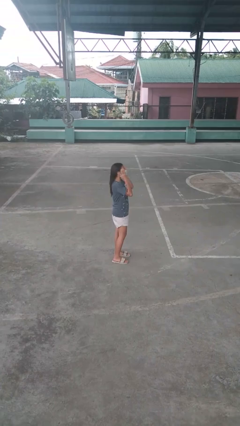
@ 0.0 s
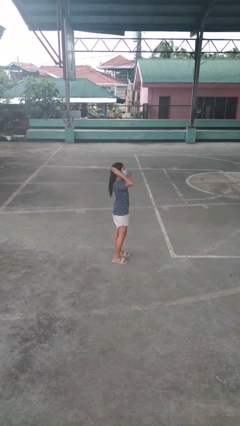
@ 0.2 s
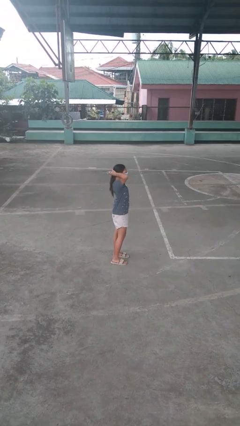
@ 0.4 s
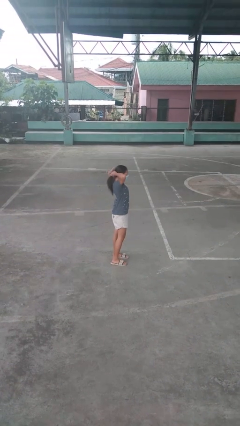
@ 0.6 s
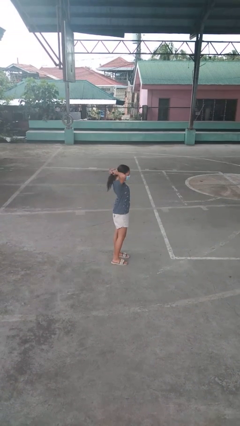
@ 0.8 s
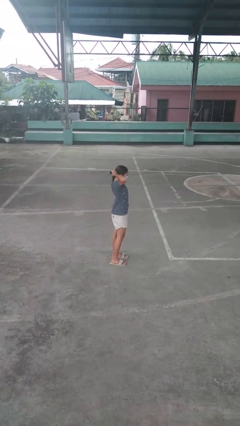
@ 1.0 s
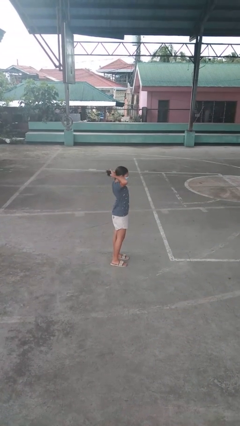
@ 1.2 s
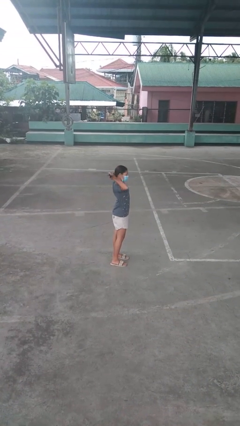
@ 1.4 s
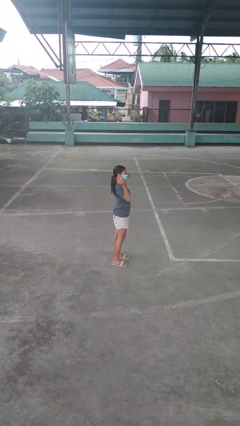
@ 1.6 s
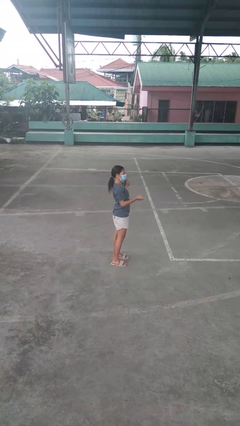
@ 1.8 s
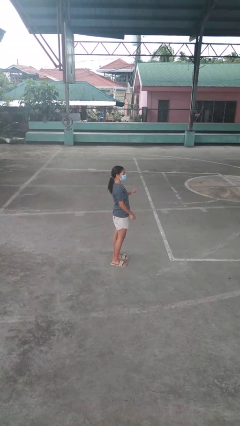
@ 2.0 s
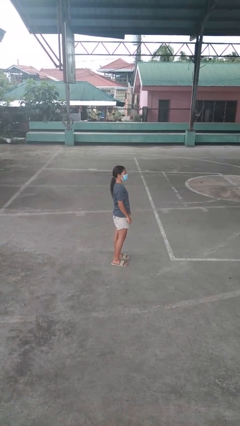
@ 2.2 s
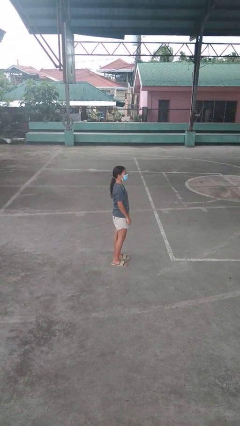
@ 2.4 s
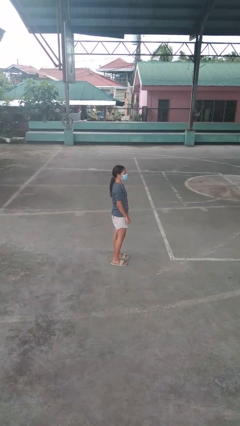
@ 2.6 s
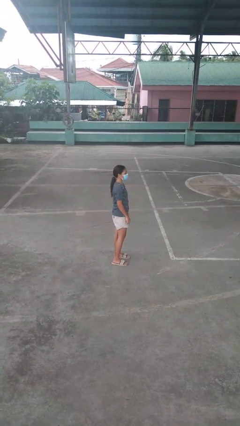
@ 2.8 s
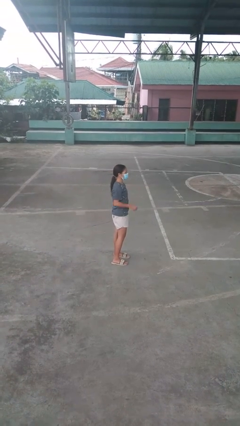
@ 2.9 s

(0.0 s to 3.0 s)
person puts hair in ponytail

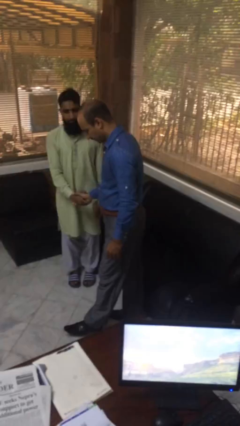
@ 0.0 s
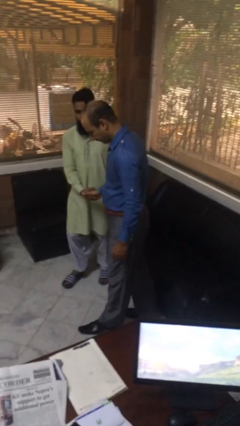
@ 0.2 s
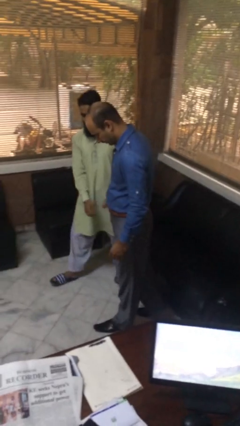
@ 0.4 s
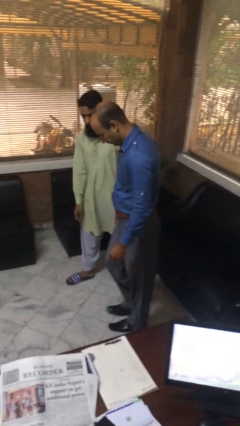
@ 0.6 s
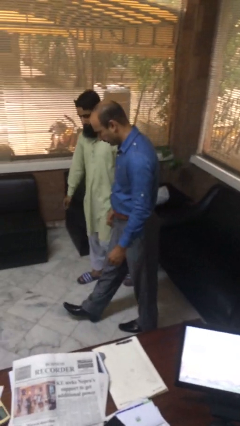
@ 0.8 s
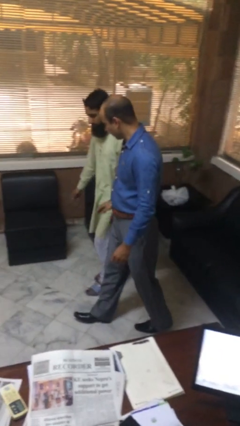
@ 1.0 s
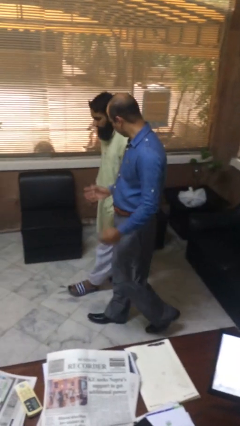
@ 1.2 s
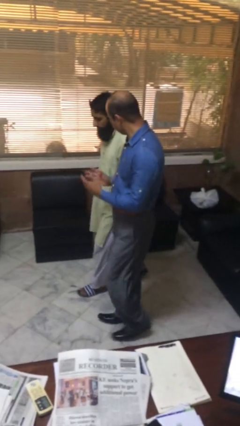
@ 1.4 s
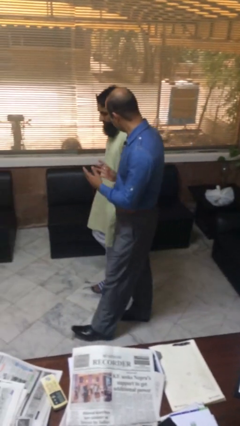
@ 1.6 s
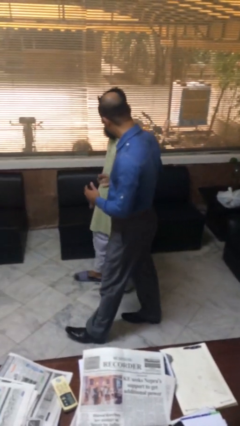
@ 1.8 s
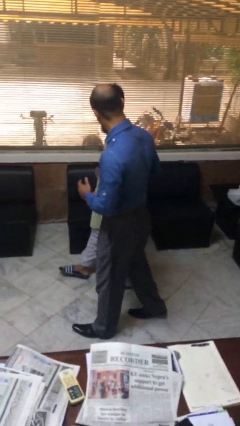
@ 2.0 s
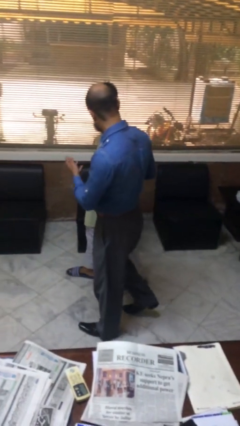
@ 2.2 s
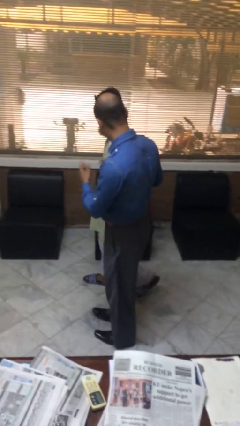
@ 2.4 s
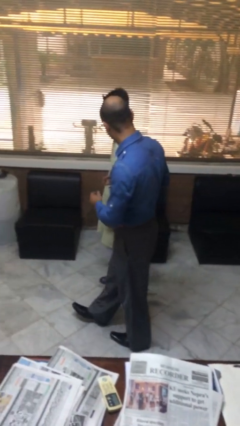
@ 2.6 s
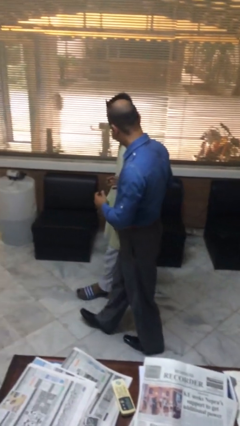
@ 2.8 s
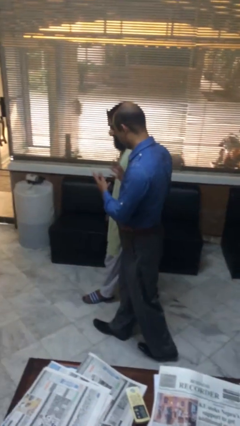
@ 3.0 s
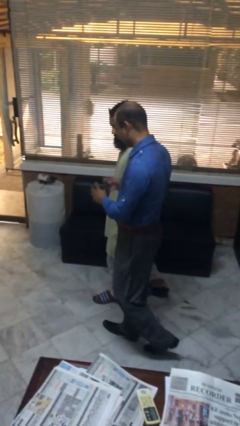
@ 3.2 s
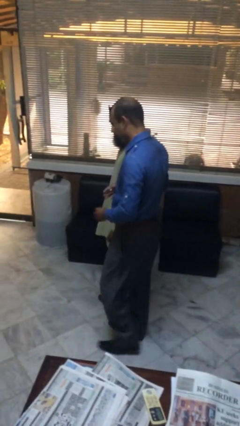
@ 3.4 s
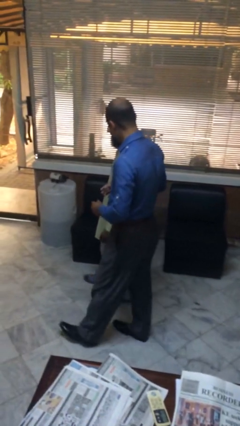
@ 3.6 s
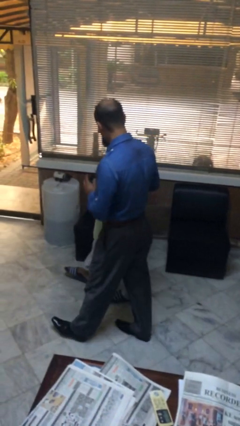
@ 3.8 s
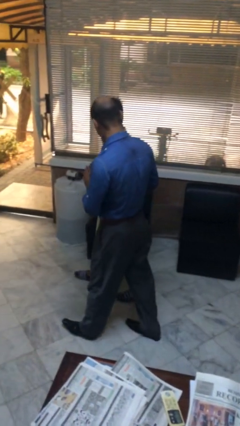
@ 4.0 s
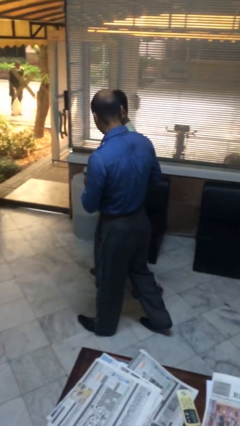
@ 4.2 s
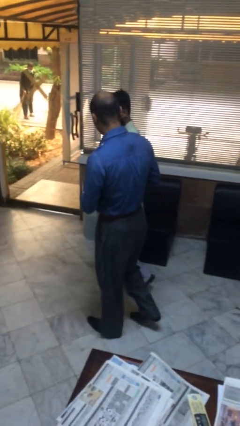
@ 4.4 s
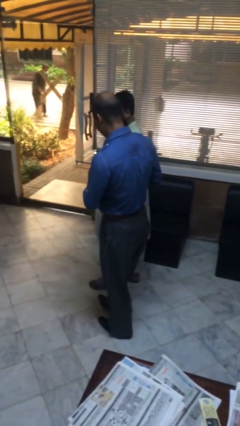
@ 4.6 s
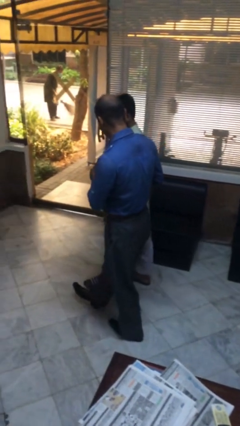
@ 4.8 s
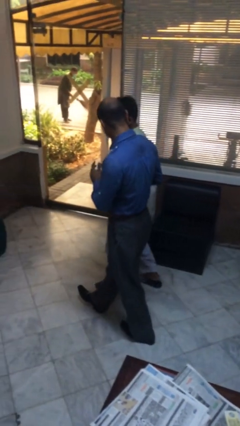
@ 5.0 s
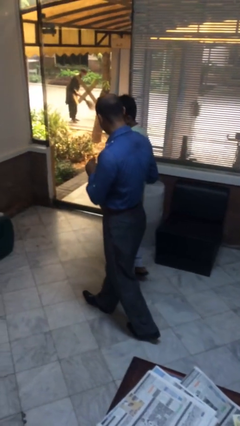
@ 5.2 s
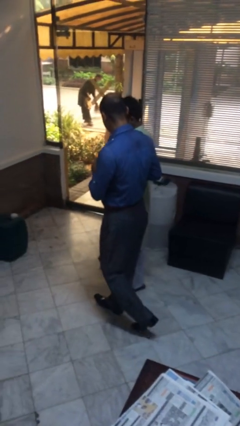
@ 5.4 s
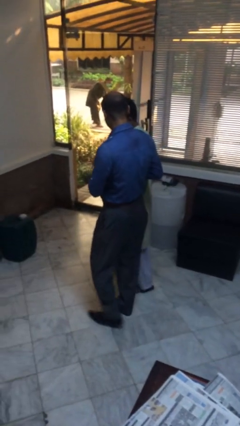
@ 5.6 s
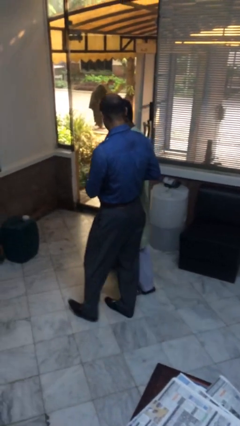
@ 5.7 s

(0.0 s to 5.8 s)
person talks to person

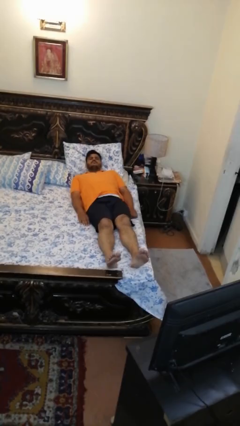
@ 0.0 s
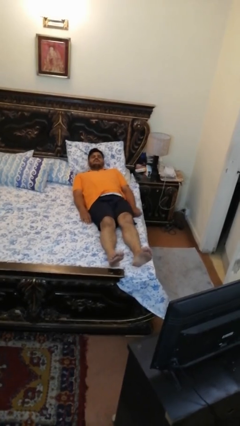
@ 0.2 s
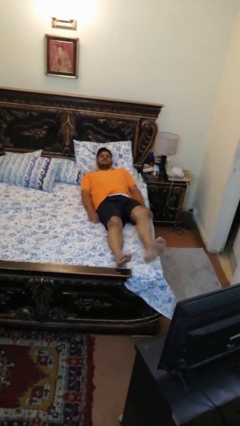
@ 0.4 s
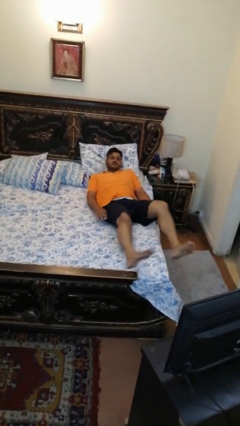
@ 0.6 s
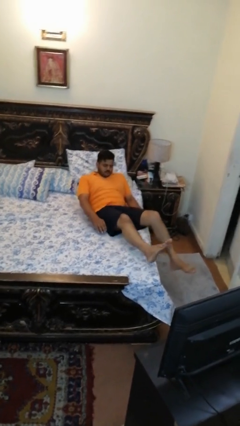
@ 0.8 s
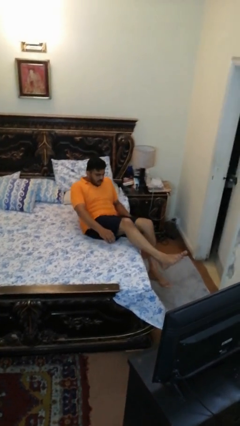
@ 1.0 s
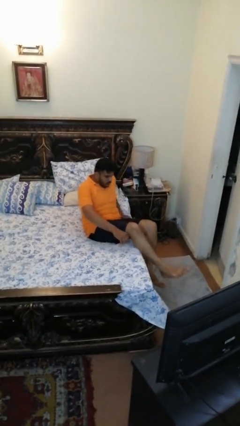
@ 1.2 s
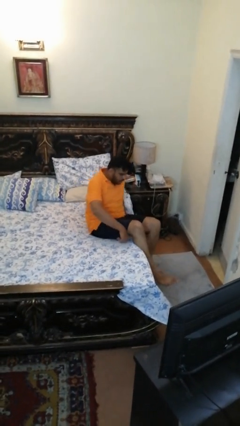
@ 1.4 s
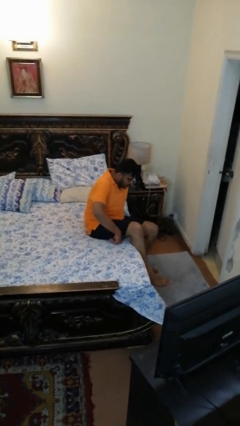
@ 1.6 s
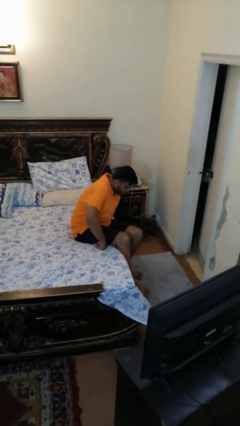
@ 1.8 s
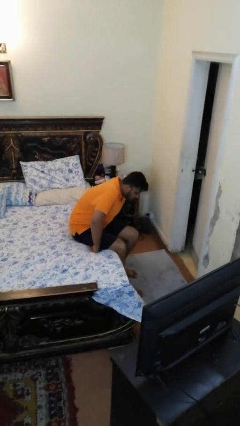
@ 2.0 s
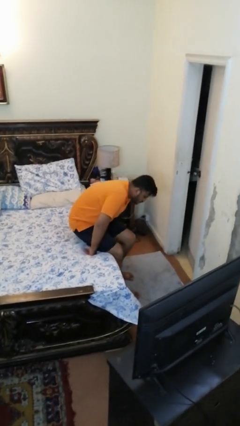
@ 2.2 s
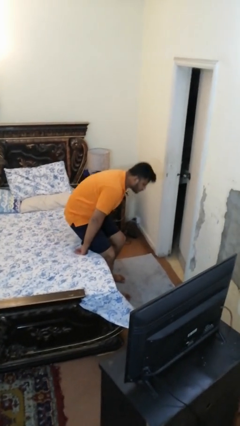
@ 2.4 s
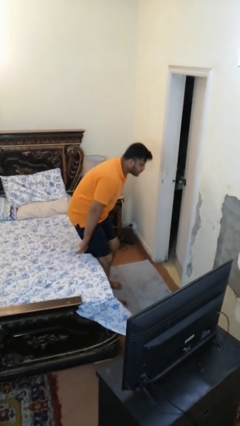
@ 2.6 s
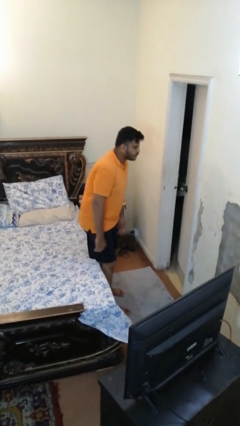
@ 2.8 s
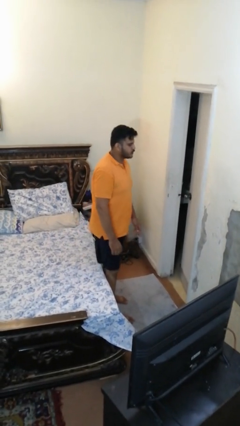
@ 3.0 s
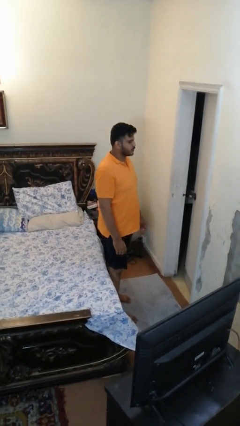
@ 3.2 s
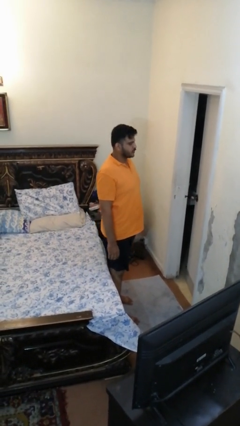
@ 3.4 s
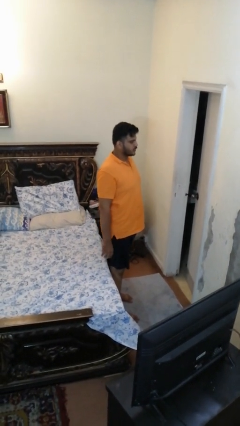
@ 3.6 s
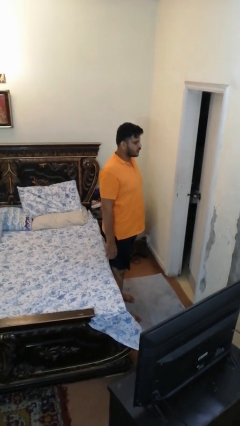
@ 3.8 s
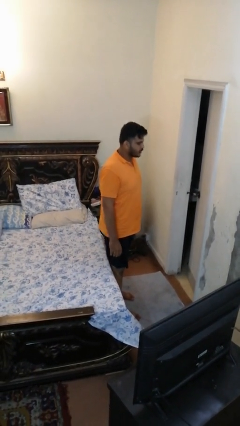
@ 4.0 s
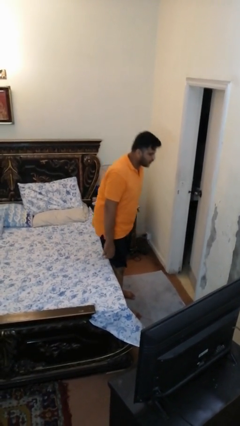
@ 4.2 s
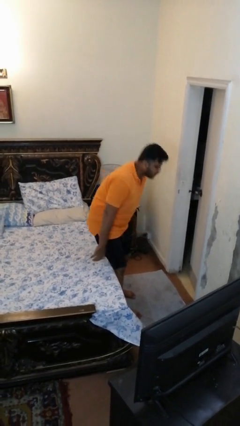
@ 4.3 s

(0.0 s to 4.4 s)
person stands up

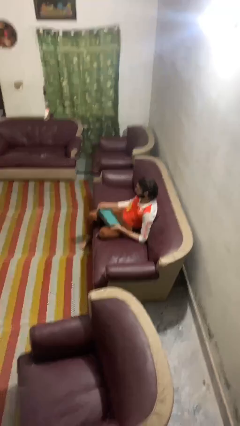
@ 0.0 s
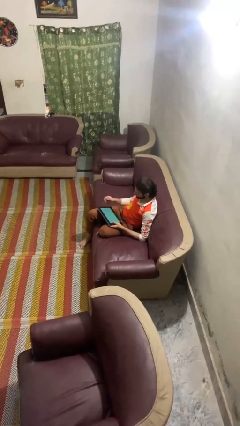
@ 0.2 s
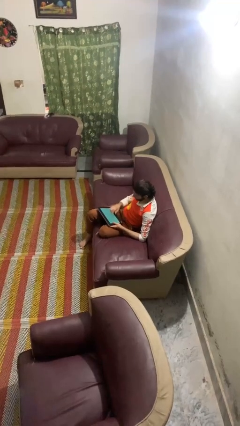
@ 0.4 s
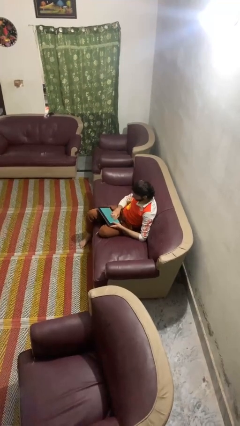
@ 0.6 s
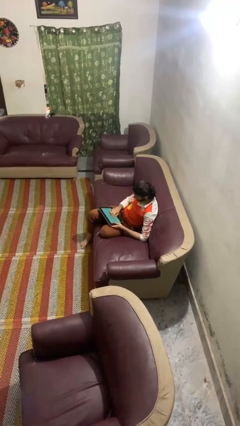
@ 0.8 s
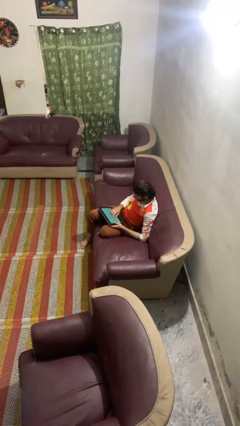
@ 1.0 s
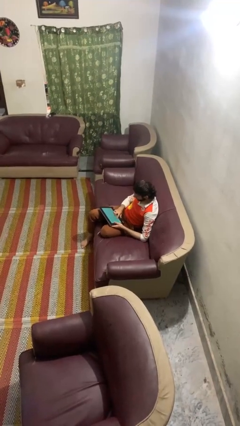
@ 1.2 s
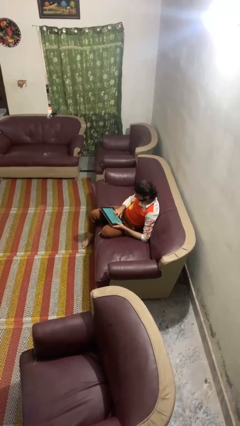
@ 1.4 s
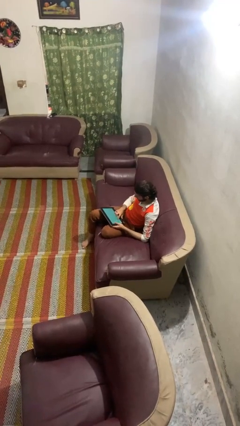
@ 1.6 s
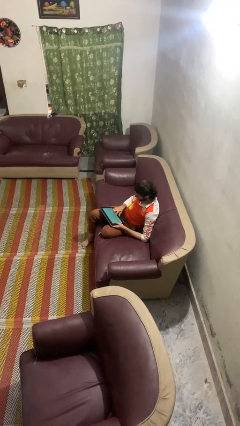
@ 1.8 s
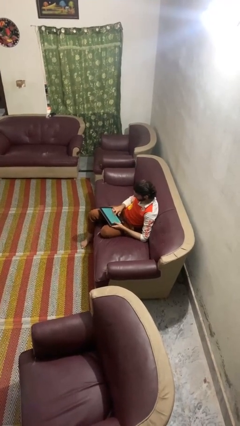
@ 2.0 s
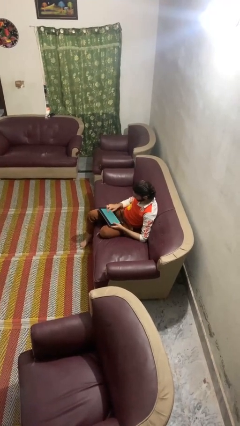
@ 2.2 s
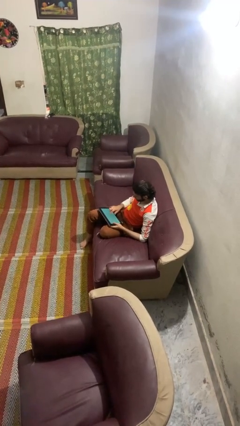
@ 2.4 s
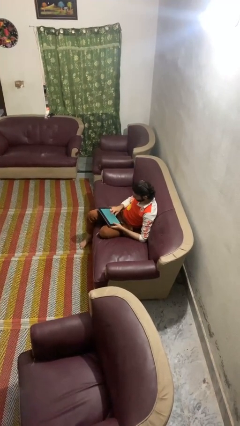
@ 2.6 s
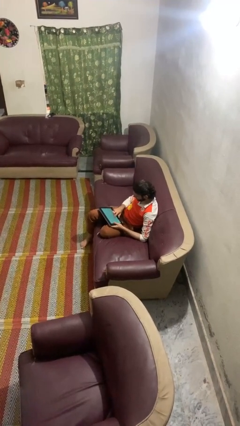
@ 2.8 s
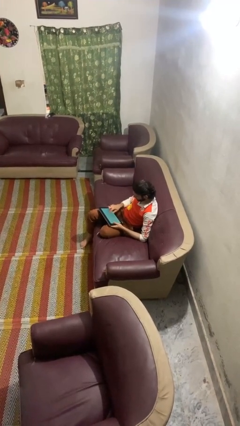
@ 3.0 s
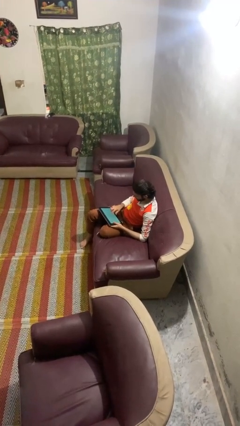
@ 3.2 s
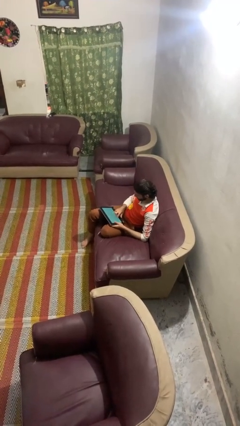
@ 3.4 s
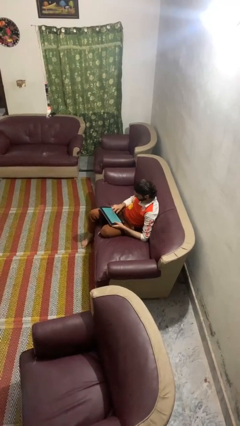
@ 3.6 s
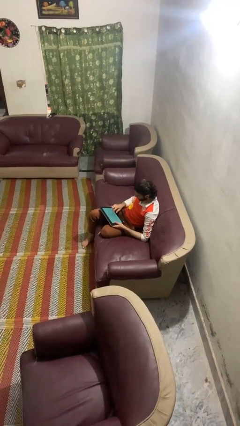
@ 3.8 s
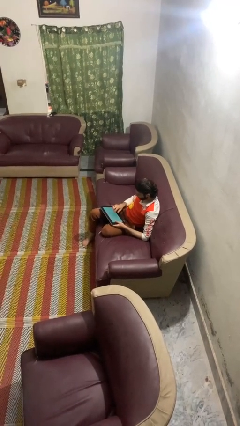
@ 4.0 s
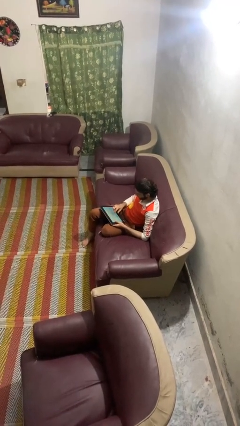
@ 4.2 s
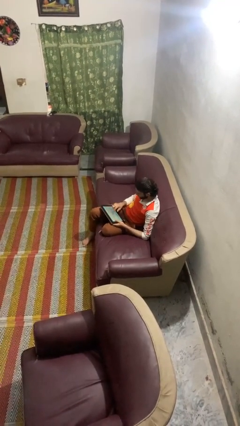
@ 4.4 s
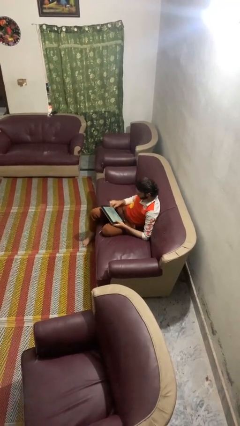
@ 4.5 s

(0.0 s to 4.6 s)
person interacts with tablet
